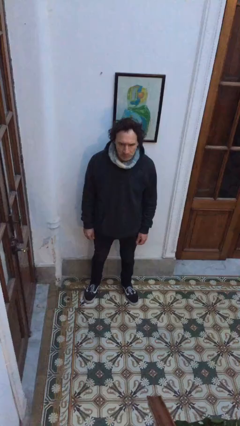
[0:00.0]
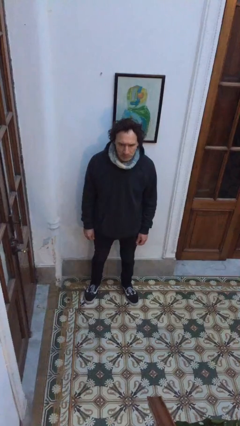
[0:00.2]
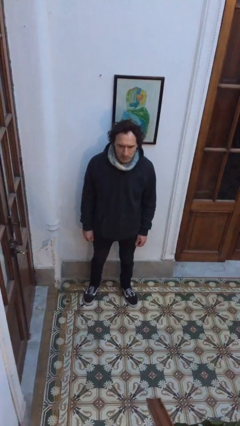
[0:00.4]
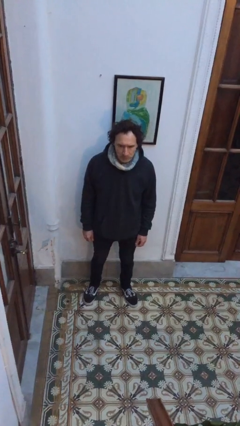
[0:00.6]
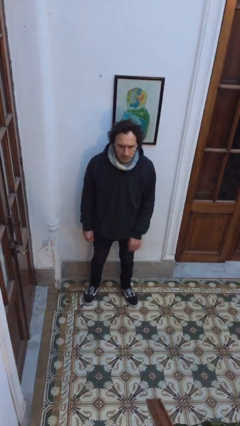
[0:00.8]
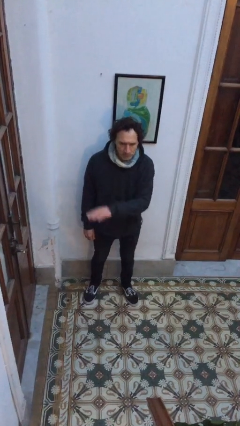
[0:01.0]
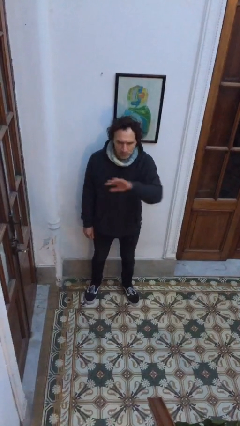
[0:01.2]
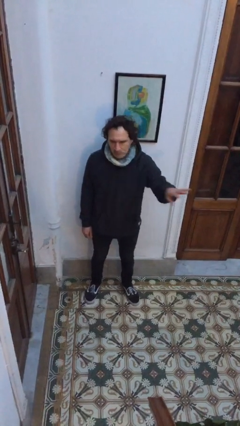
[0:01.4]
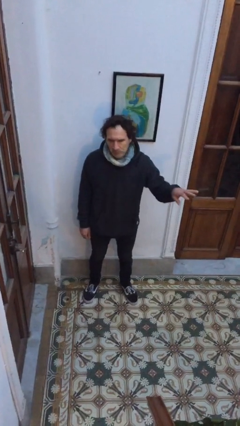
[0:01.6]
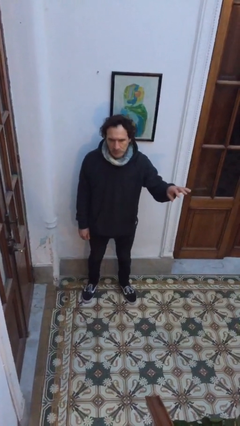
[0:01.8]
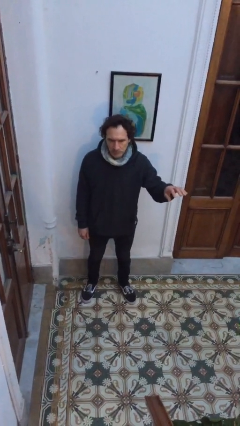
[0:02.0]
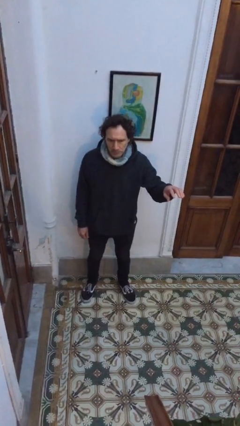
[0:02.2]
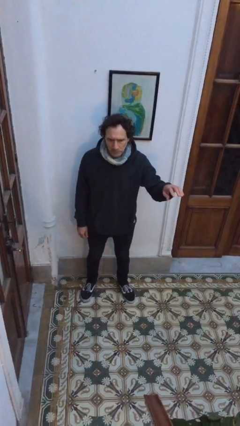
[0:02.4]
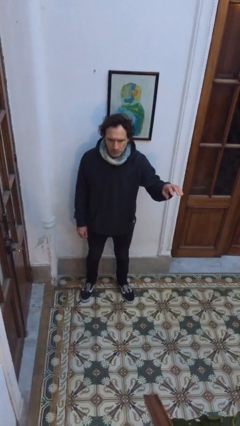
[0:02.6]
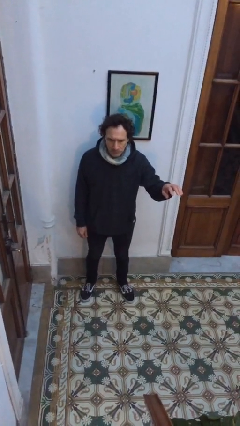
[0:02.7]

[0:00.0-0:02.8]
person gestures swipe left

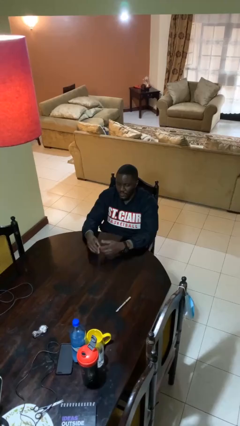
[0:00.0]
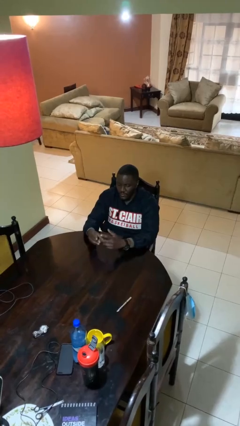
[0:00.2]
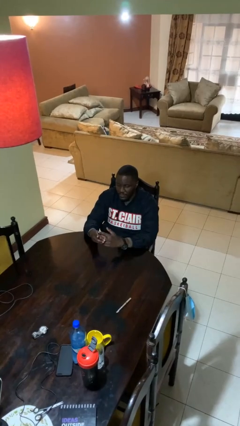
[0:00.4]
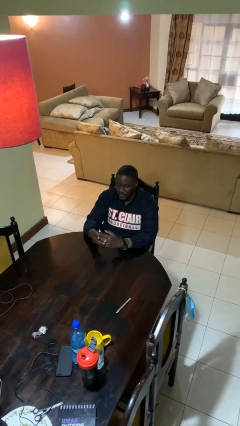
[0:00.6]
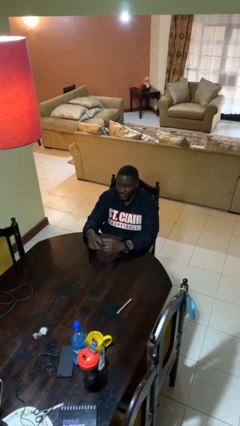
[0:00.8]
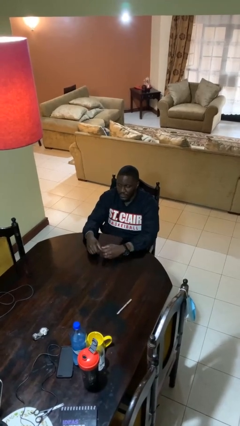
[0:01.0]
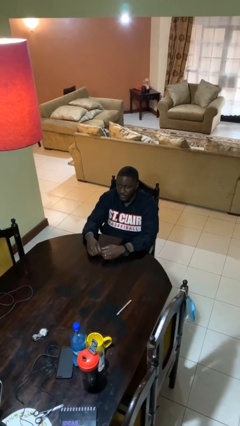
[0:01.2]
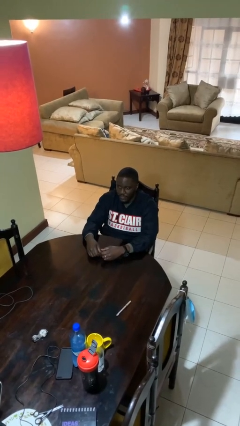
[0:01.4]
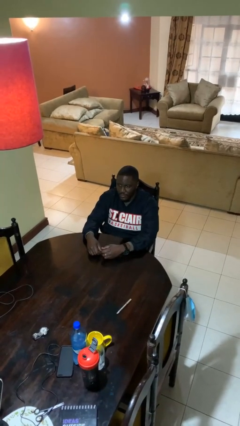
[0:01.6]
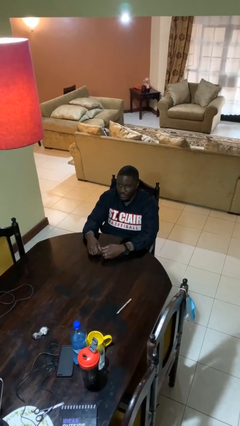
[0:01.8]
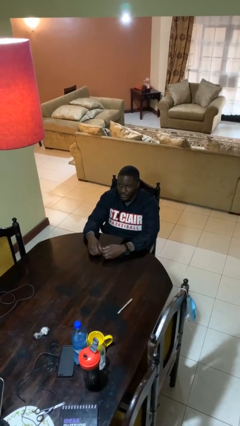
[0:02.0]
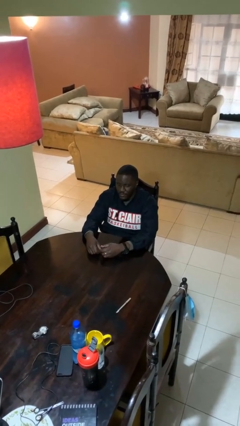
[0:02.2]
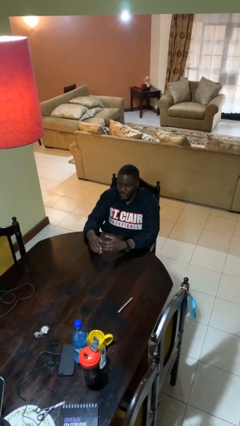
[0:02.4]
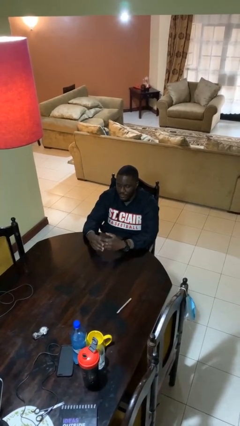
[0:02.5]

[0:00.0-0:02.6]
person puts on ring

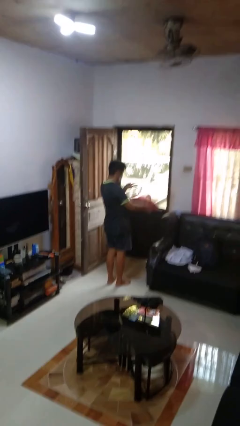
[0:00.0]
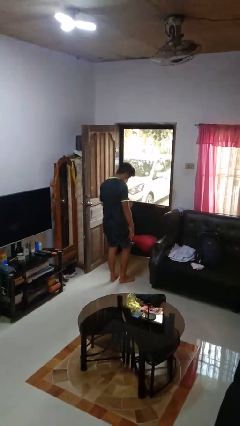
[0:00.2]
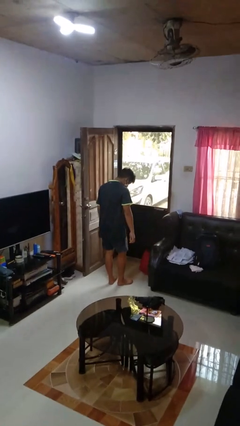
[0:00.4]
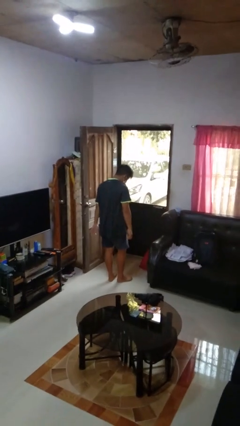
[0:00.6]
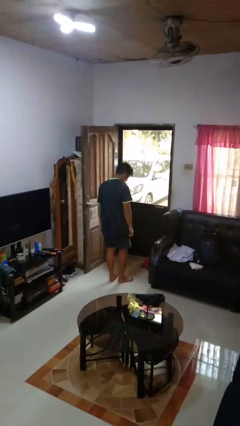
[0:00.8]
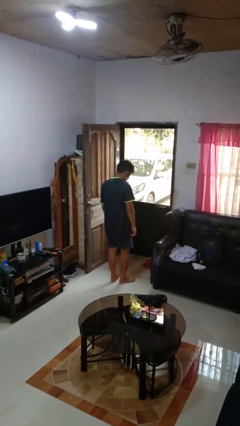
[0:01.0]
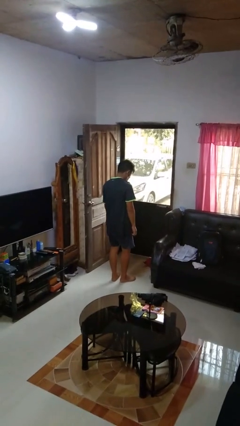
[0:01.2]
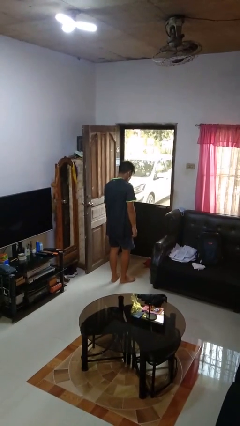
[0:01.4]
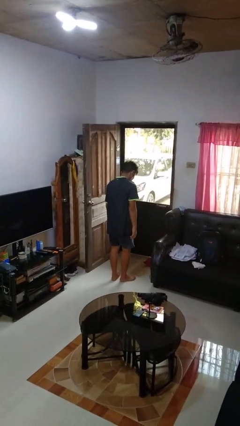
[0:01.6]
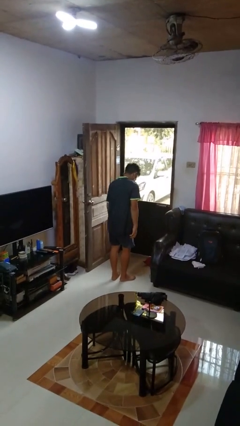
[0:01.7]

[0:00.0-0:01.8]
person drops object

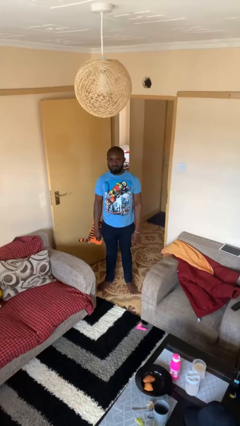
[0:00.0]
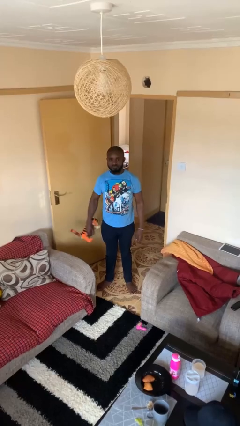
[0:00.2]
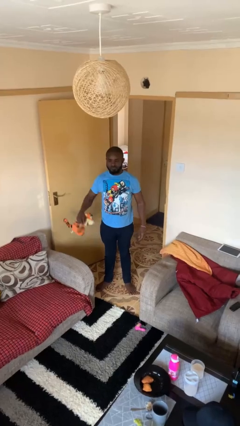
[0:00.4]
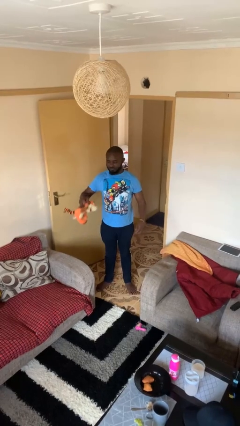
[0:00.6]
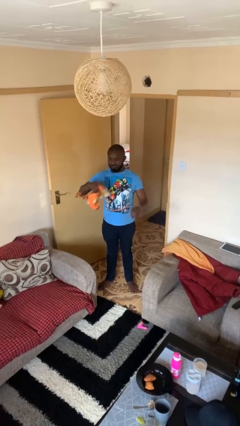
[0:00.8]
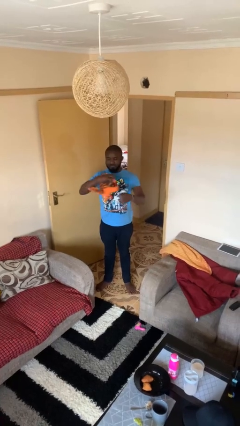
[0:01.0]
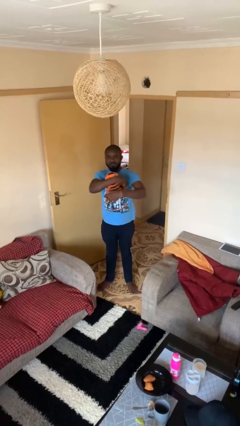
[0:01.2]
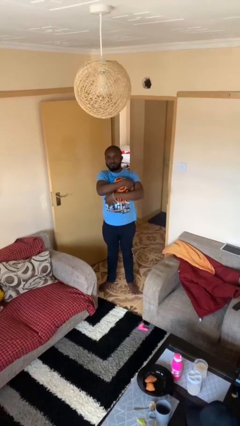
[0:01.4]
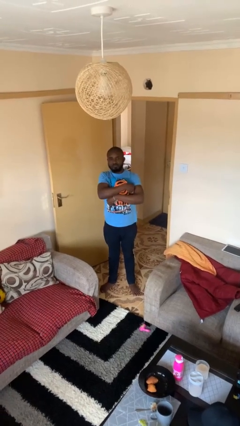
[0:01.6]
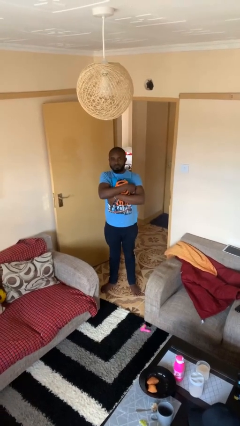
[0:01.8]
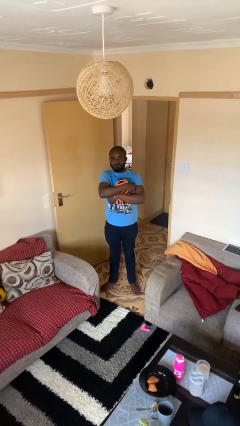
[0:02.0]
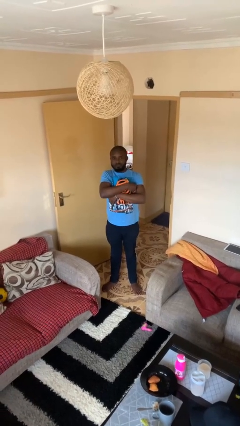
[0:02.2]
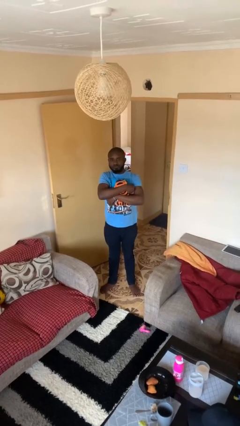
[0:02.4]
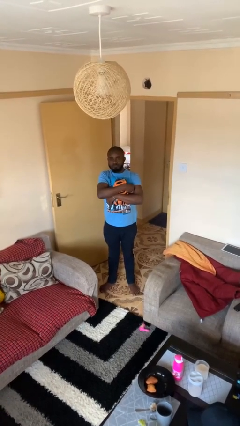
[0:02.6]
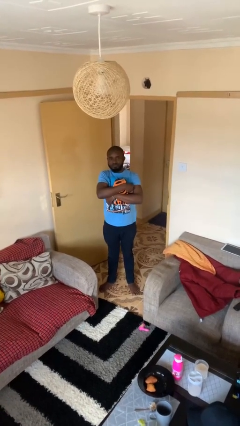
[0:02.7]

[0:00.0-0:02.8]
person hugs stuffed animal

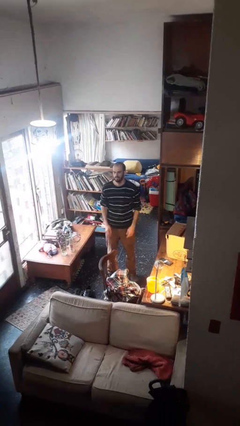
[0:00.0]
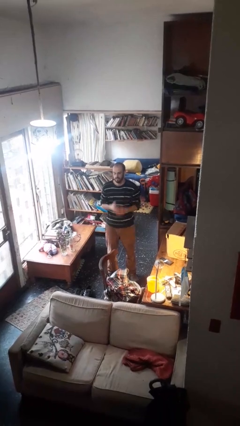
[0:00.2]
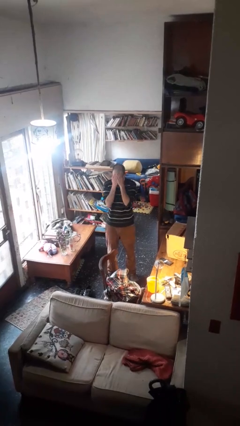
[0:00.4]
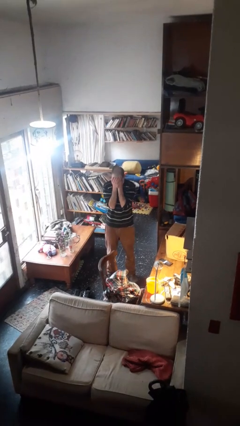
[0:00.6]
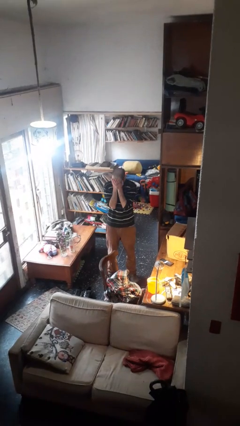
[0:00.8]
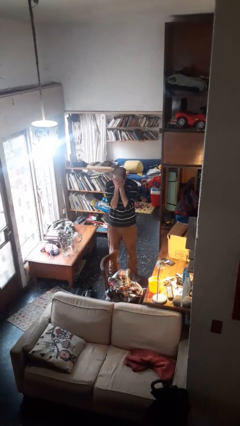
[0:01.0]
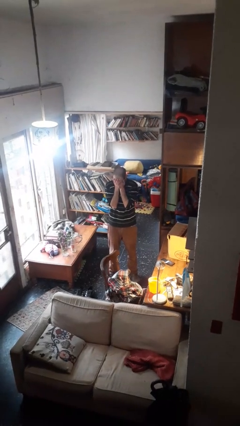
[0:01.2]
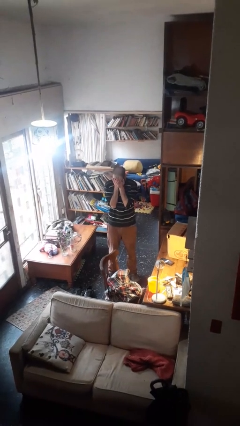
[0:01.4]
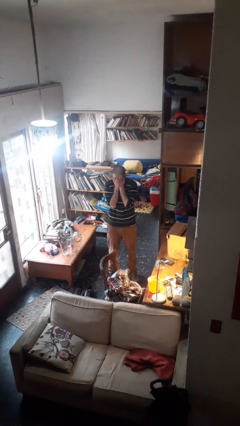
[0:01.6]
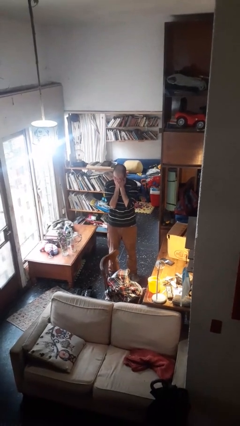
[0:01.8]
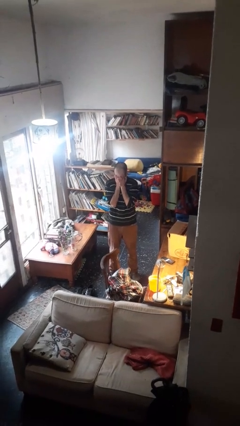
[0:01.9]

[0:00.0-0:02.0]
person covers face with hands

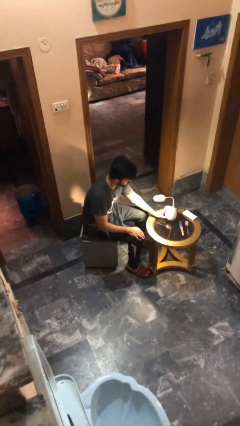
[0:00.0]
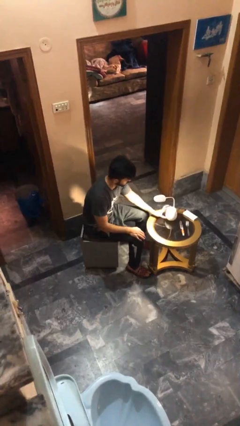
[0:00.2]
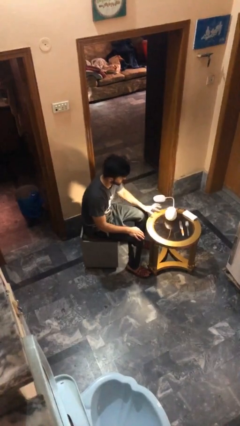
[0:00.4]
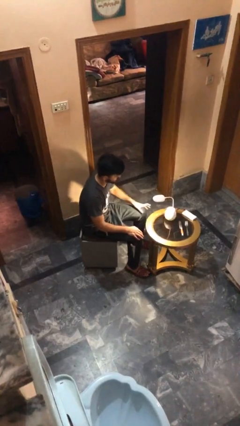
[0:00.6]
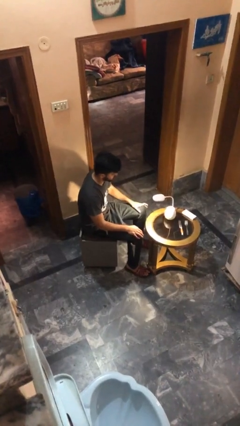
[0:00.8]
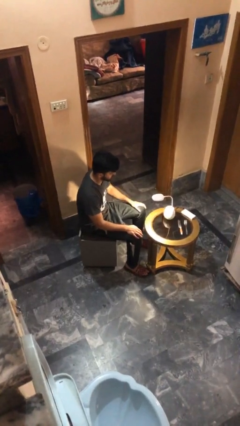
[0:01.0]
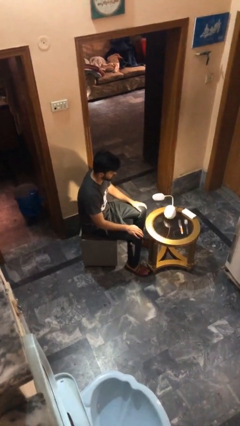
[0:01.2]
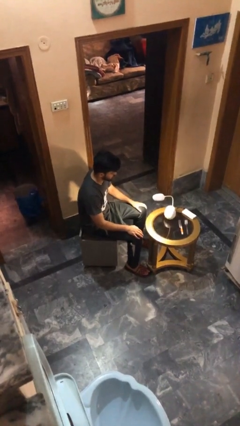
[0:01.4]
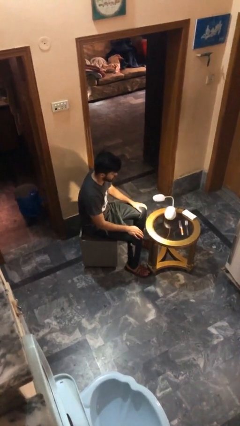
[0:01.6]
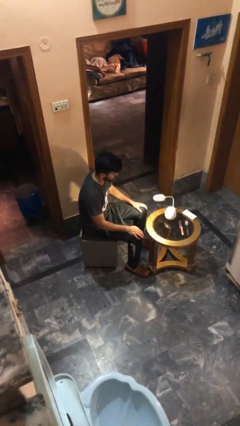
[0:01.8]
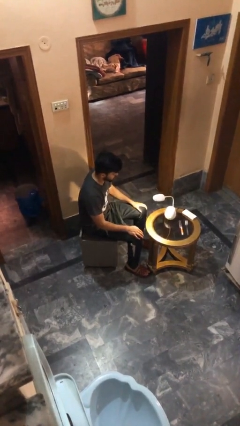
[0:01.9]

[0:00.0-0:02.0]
person turns off lamp

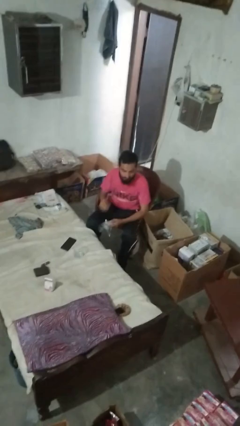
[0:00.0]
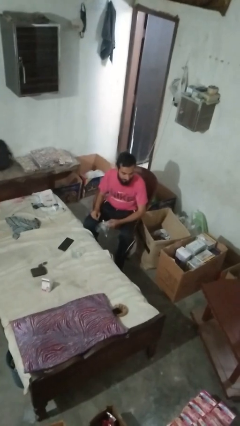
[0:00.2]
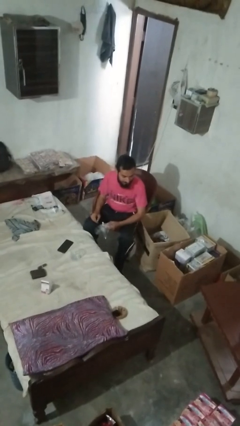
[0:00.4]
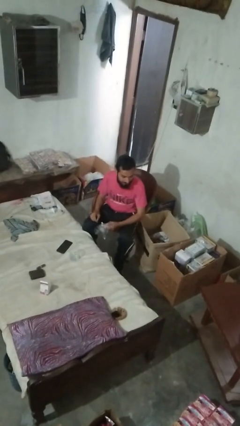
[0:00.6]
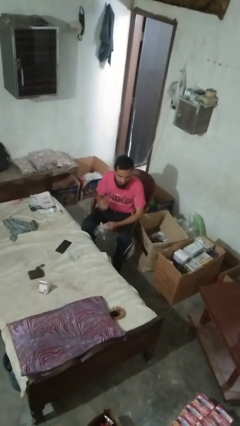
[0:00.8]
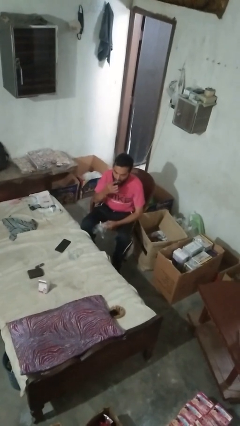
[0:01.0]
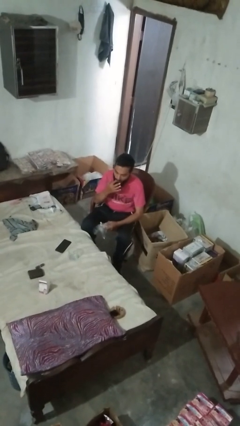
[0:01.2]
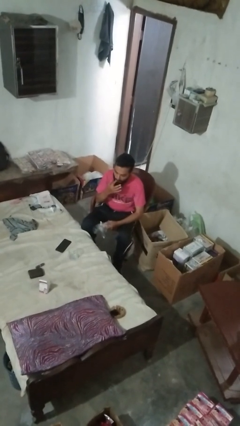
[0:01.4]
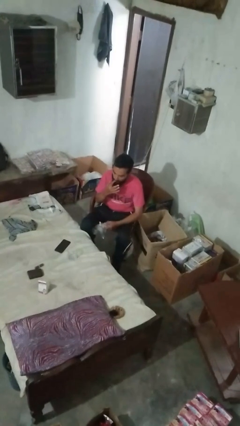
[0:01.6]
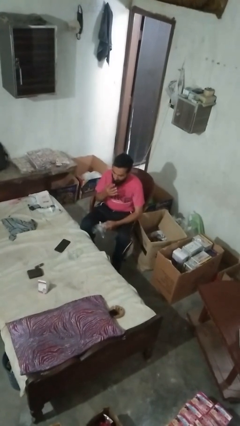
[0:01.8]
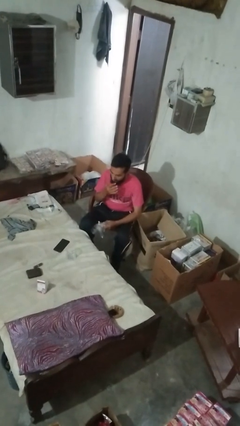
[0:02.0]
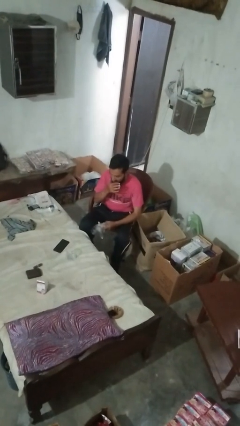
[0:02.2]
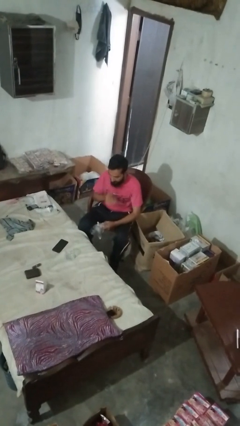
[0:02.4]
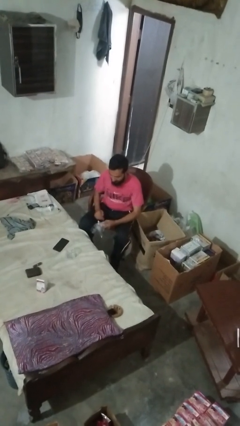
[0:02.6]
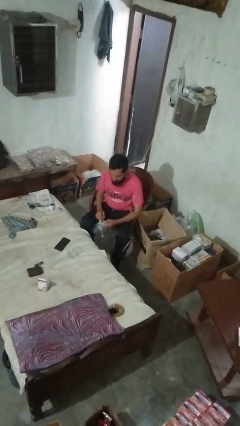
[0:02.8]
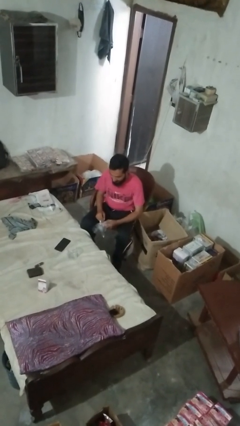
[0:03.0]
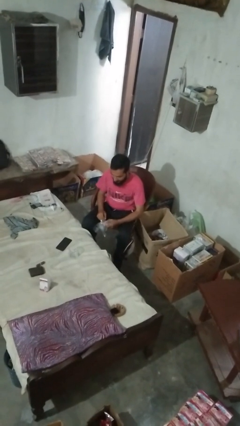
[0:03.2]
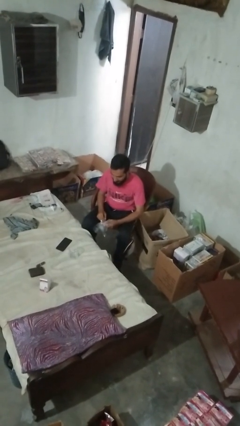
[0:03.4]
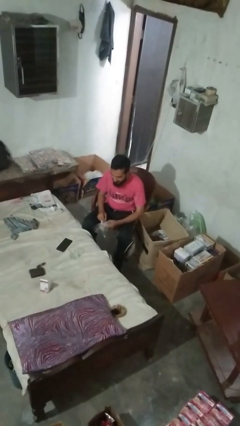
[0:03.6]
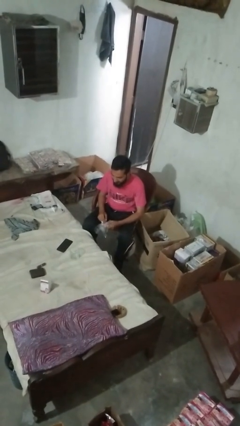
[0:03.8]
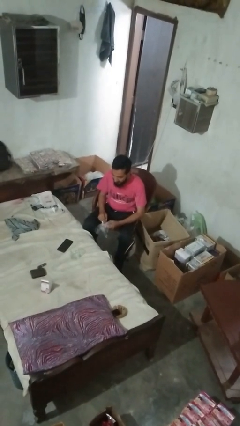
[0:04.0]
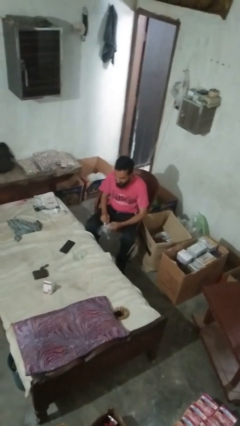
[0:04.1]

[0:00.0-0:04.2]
person licks fingers
